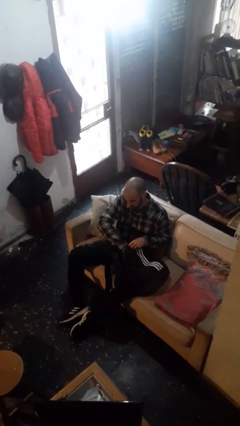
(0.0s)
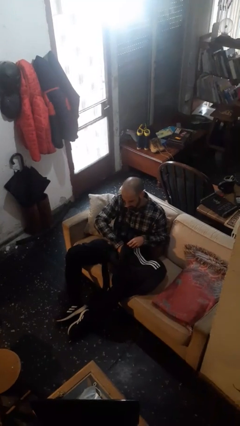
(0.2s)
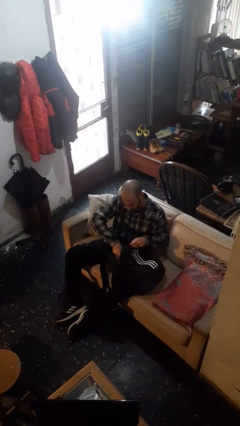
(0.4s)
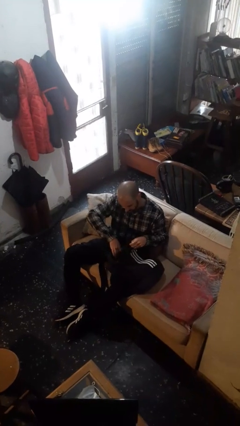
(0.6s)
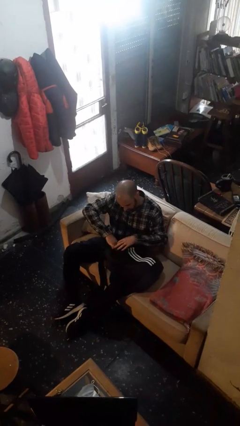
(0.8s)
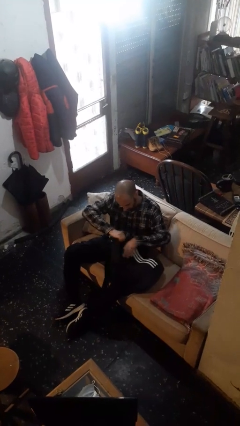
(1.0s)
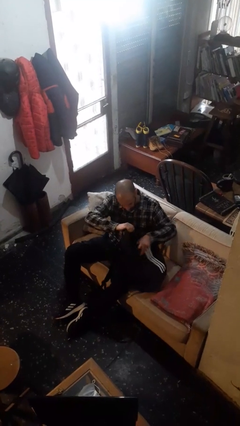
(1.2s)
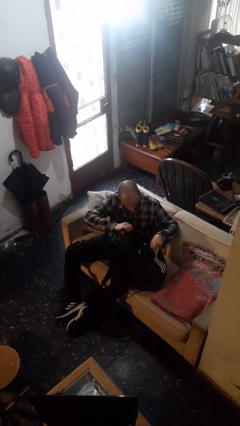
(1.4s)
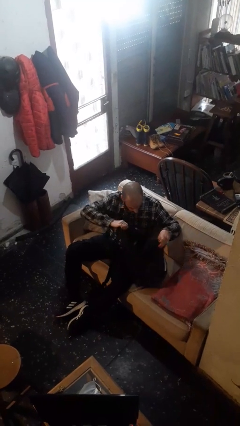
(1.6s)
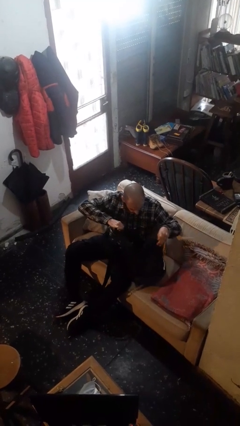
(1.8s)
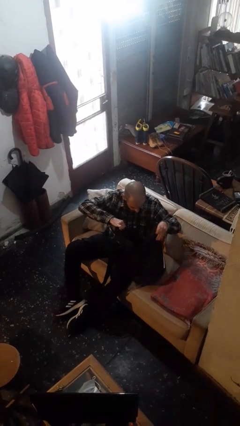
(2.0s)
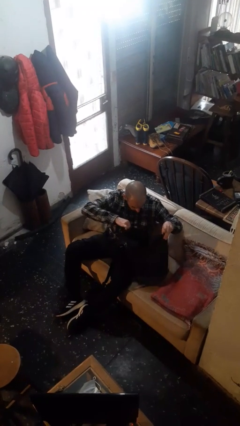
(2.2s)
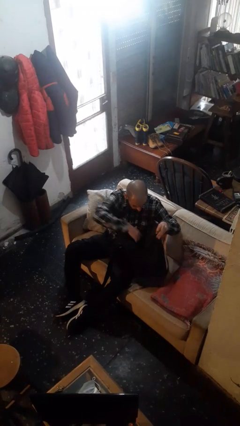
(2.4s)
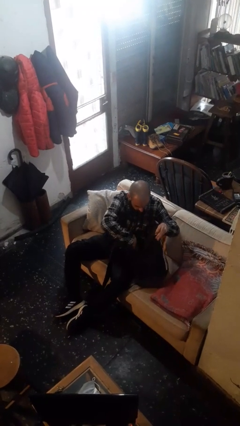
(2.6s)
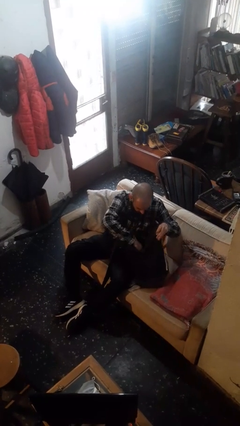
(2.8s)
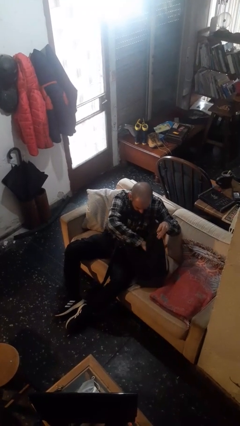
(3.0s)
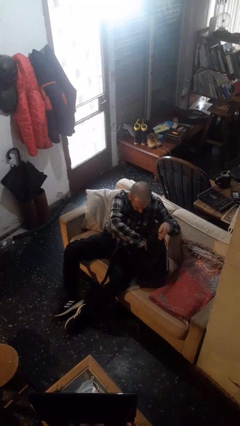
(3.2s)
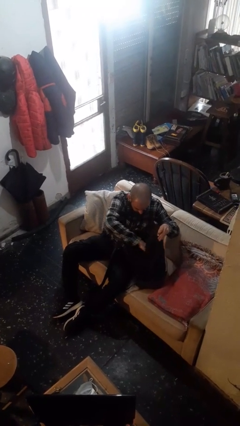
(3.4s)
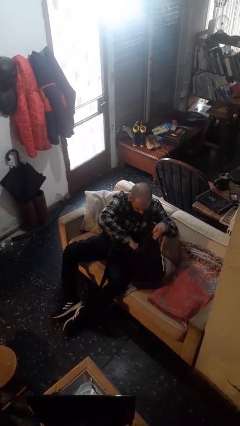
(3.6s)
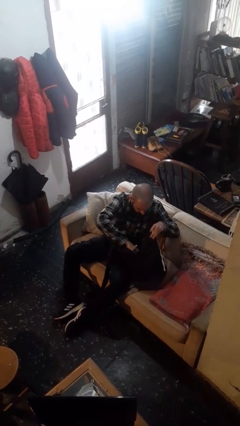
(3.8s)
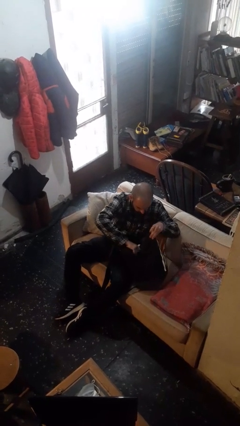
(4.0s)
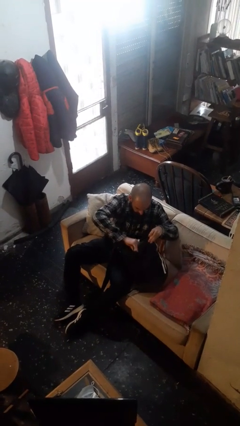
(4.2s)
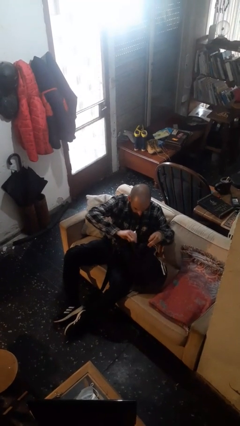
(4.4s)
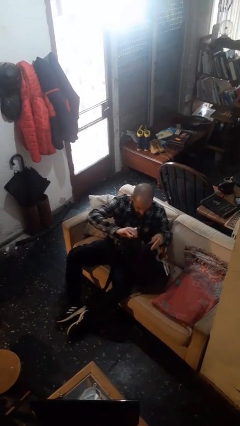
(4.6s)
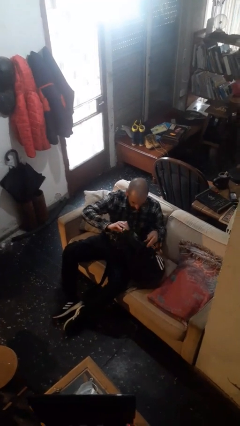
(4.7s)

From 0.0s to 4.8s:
person searches in backpack

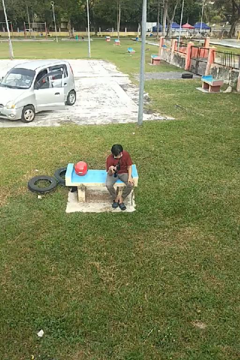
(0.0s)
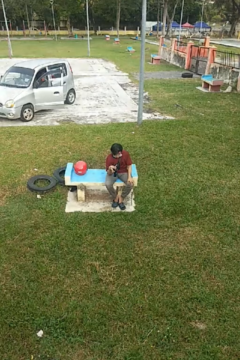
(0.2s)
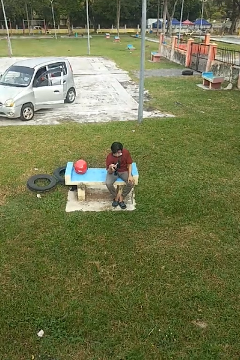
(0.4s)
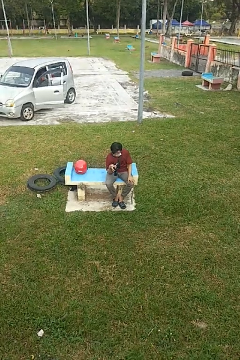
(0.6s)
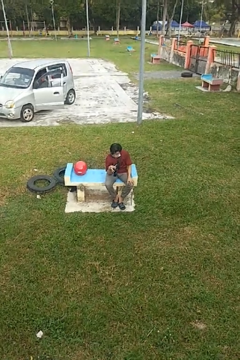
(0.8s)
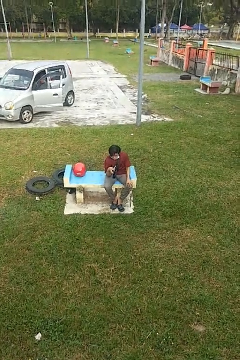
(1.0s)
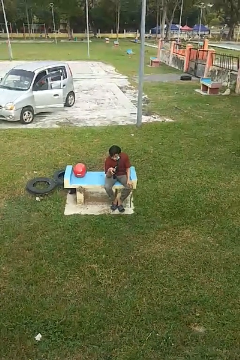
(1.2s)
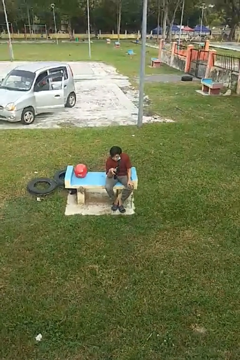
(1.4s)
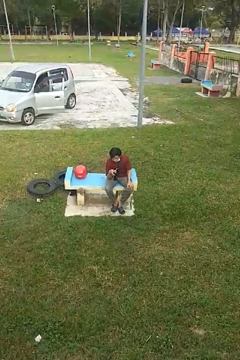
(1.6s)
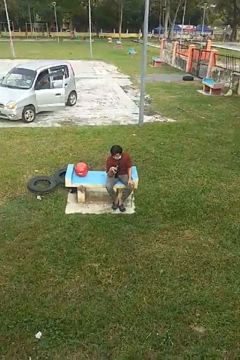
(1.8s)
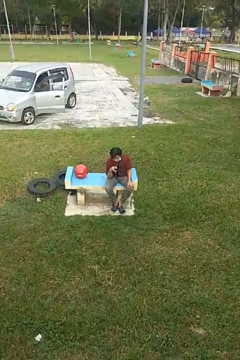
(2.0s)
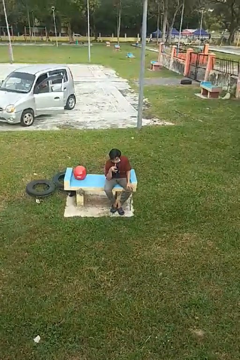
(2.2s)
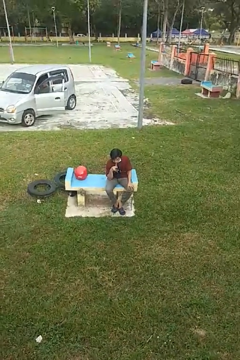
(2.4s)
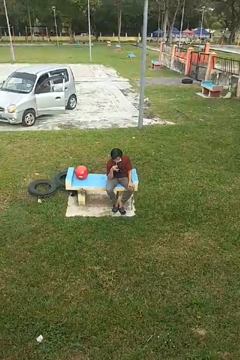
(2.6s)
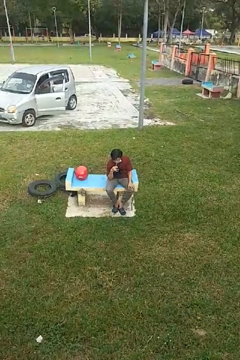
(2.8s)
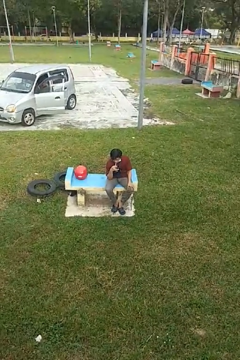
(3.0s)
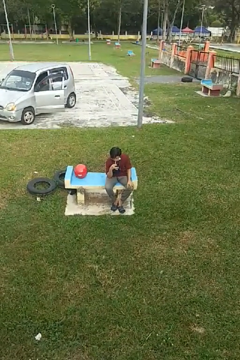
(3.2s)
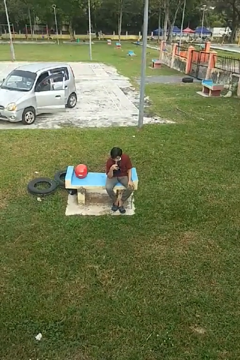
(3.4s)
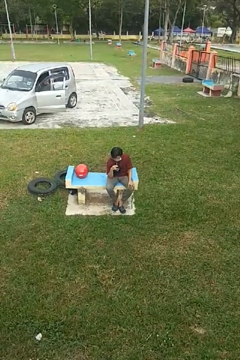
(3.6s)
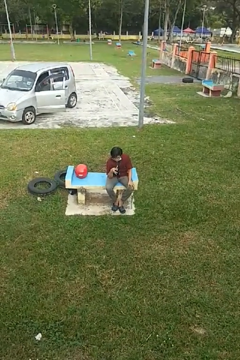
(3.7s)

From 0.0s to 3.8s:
person drinks from straw

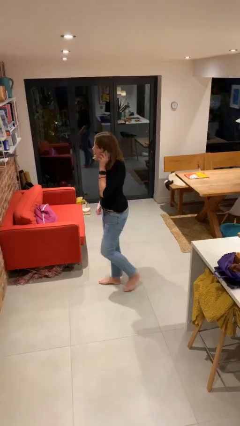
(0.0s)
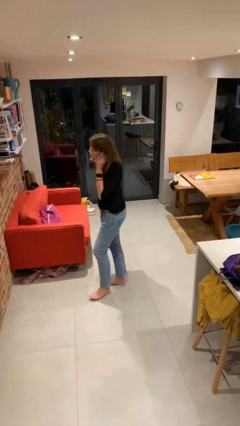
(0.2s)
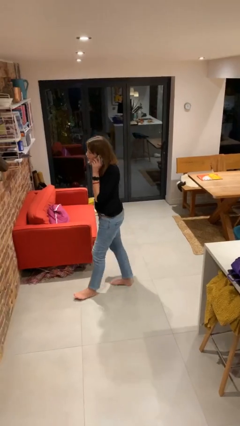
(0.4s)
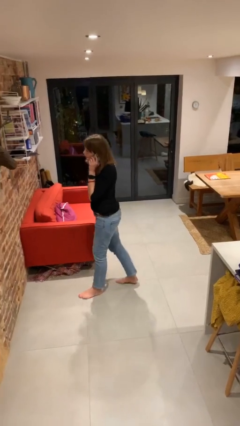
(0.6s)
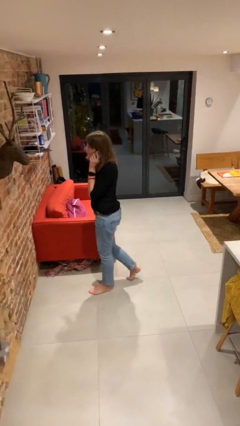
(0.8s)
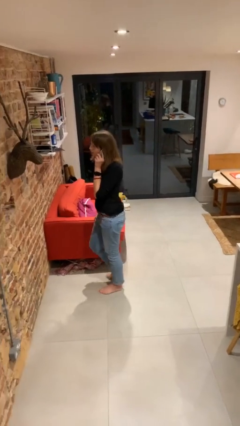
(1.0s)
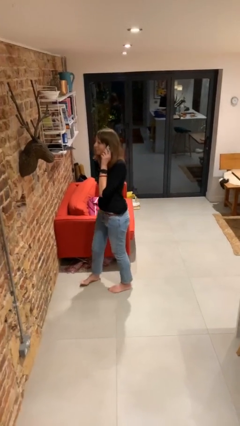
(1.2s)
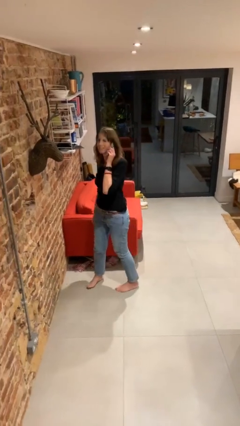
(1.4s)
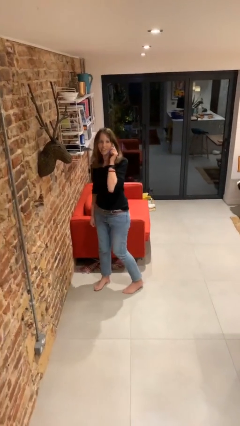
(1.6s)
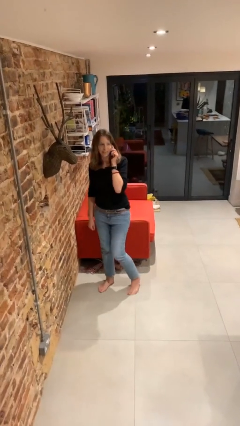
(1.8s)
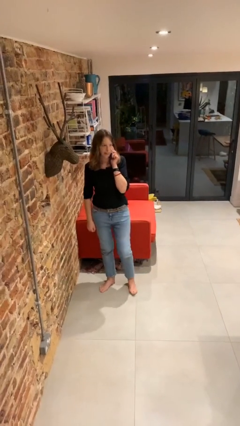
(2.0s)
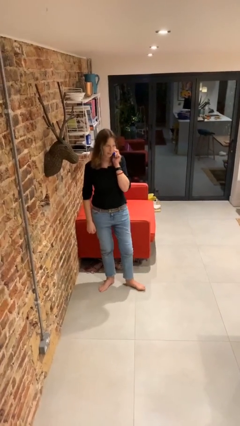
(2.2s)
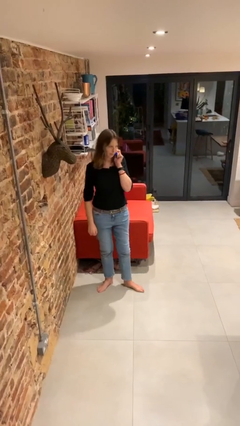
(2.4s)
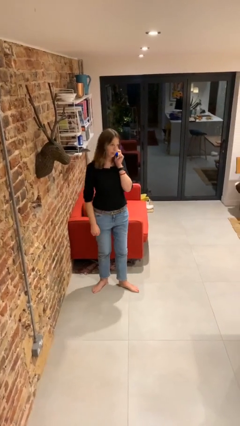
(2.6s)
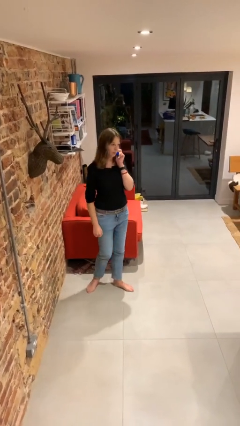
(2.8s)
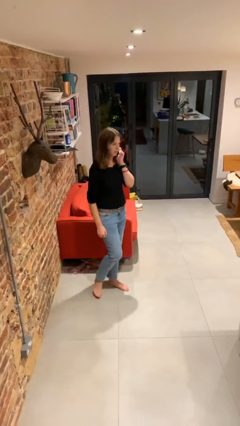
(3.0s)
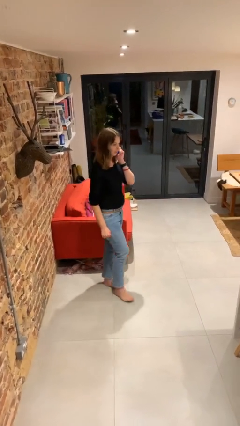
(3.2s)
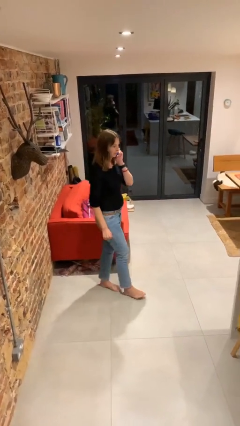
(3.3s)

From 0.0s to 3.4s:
person talks on phone

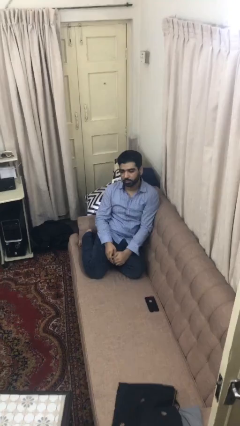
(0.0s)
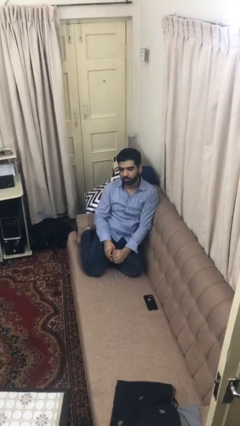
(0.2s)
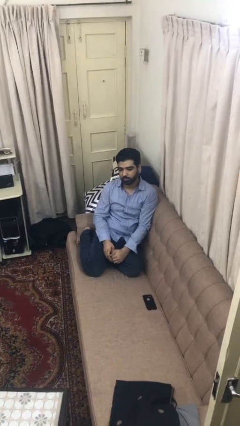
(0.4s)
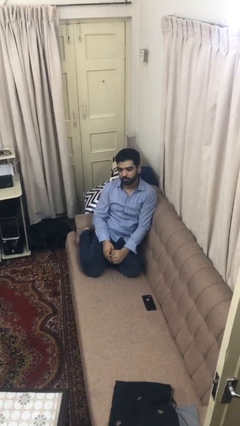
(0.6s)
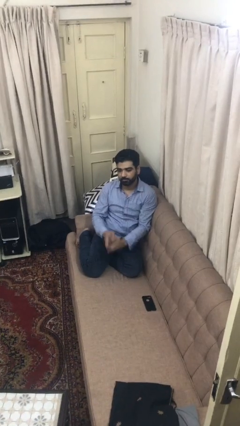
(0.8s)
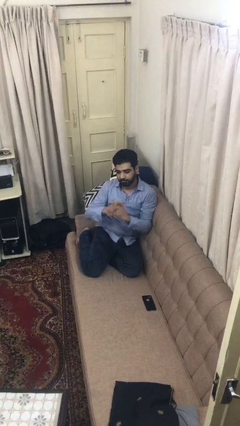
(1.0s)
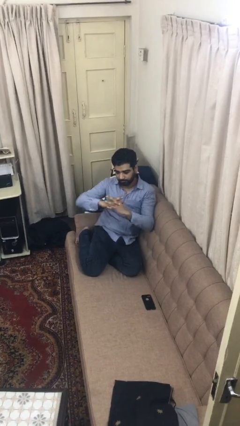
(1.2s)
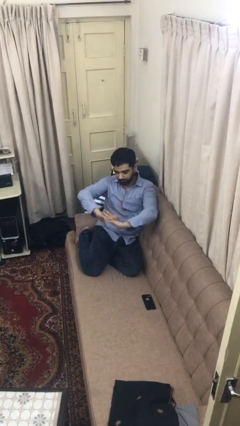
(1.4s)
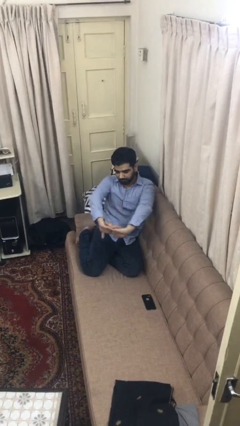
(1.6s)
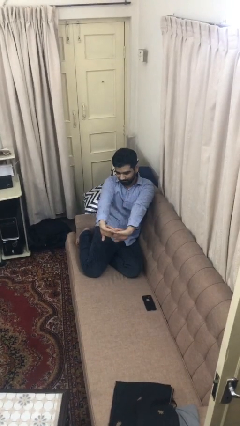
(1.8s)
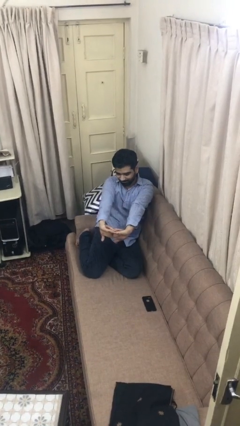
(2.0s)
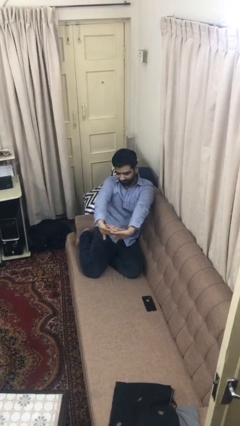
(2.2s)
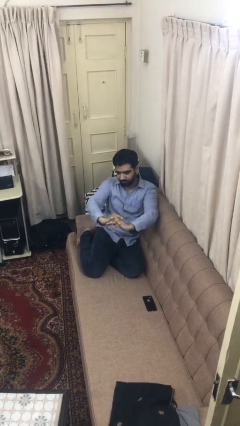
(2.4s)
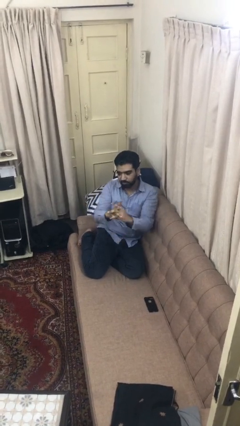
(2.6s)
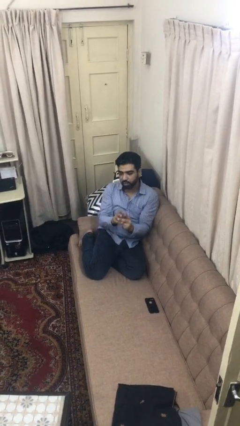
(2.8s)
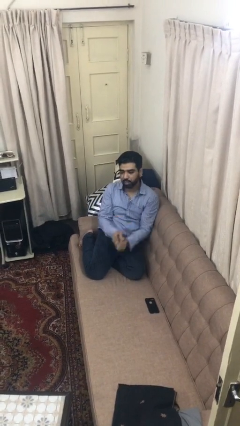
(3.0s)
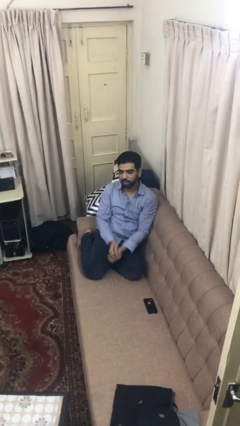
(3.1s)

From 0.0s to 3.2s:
person cracks knuckles

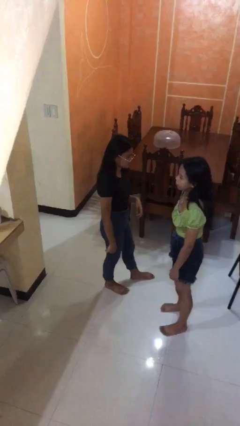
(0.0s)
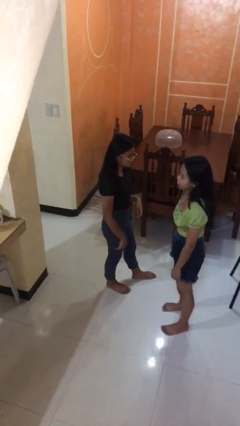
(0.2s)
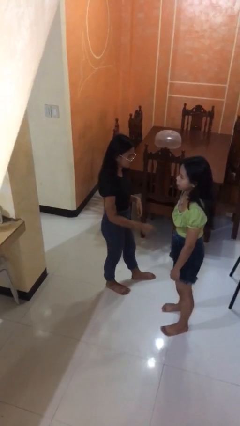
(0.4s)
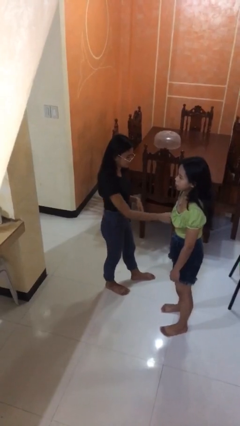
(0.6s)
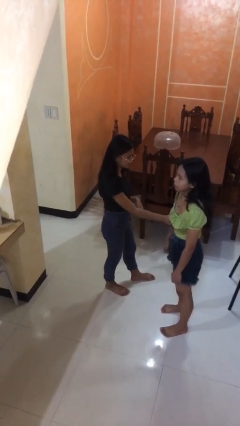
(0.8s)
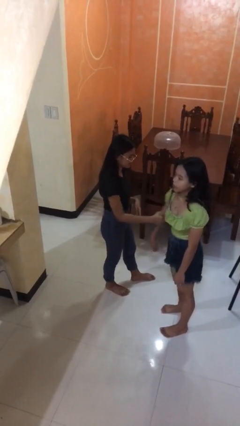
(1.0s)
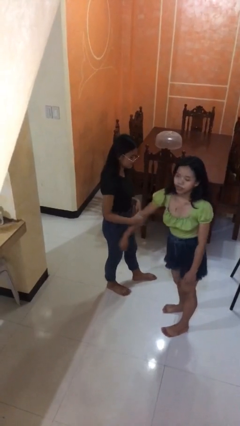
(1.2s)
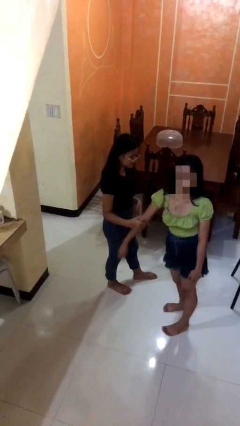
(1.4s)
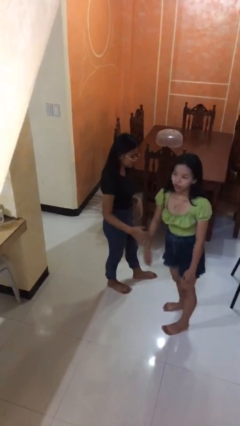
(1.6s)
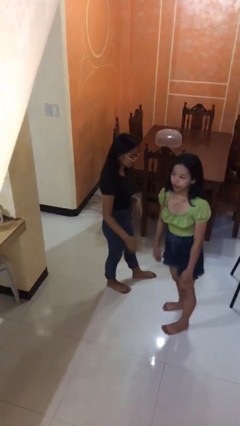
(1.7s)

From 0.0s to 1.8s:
person grabs person by forearm

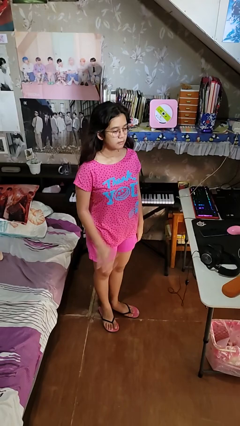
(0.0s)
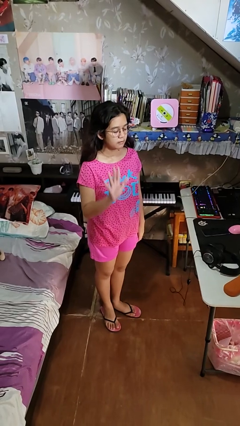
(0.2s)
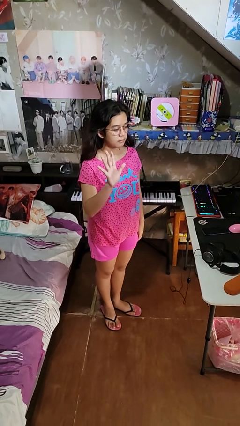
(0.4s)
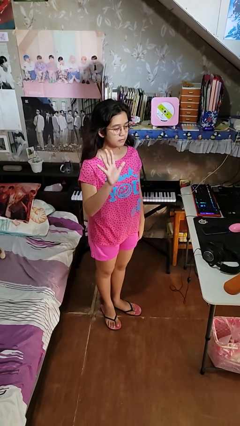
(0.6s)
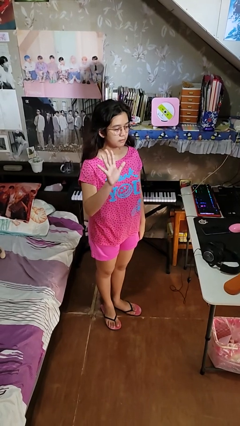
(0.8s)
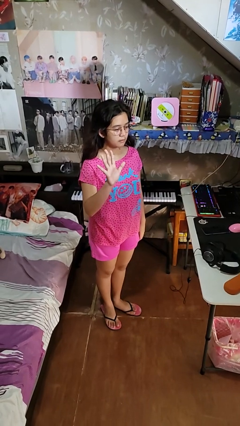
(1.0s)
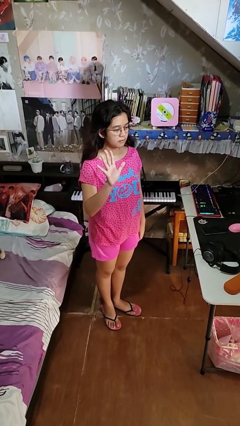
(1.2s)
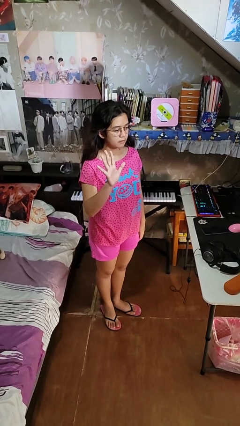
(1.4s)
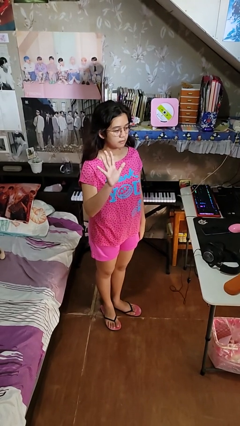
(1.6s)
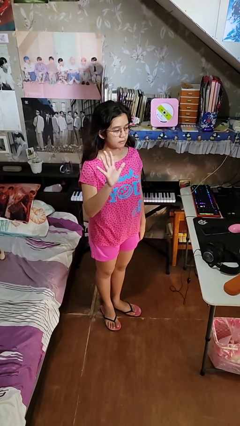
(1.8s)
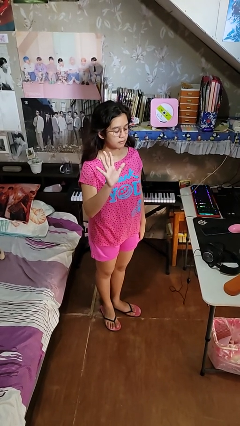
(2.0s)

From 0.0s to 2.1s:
person gestures number five
